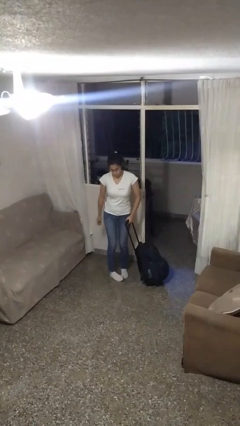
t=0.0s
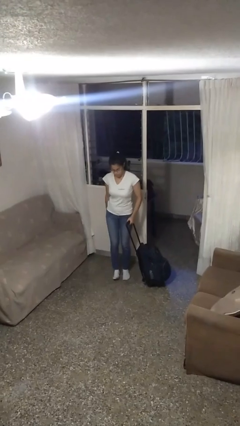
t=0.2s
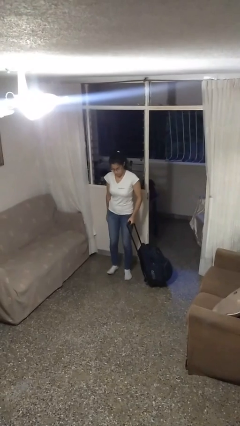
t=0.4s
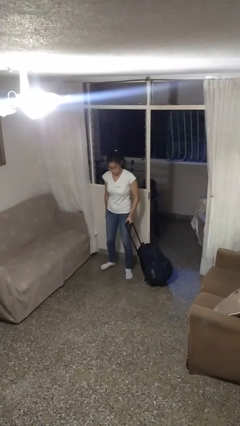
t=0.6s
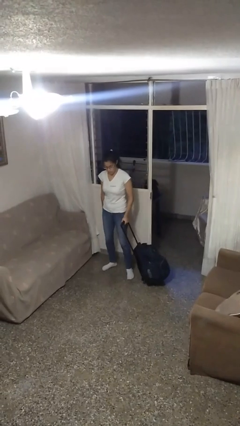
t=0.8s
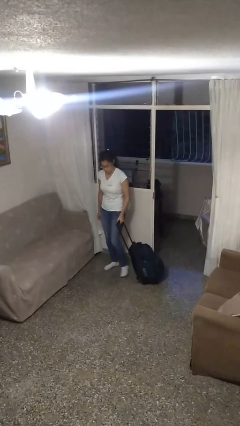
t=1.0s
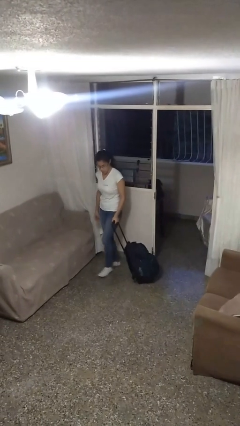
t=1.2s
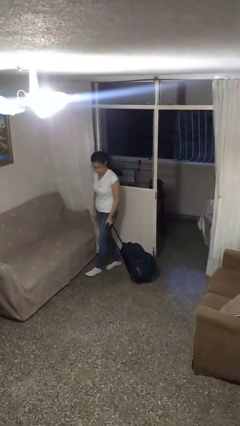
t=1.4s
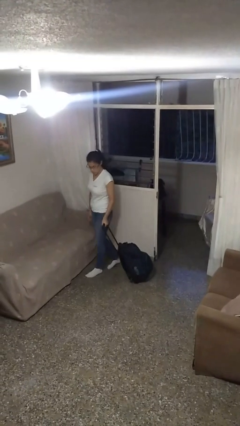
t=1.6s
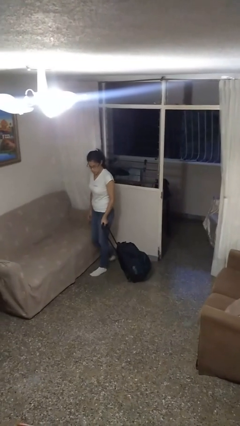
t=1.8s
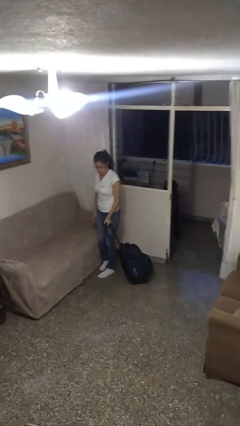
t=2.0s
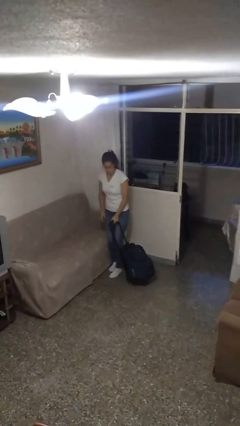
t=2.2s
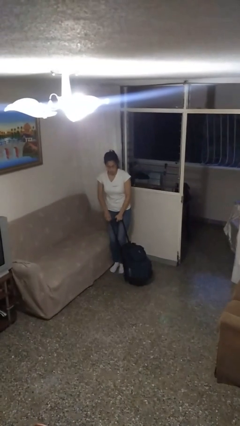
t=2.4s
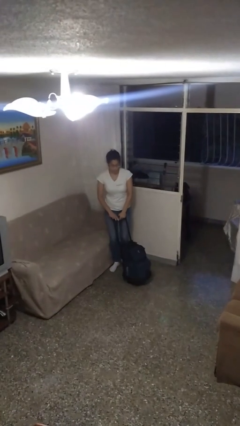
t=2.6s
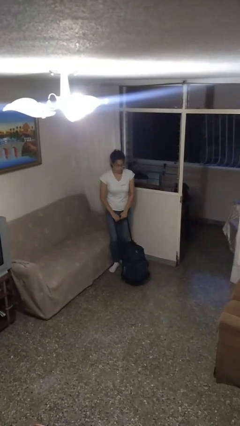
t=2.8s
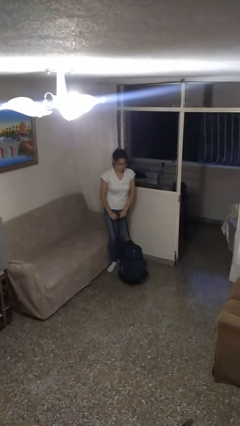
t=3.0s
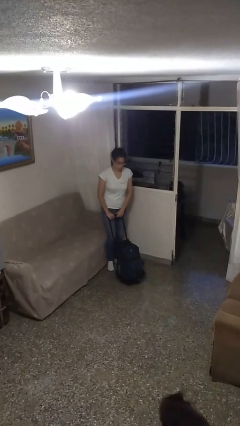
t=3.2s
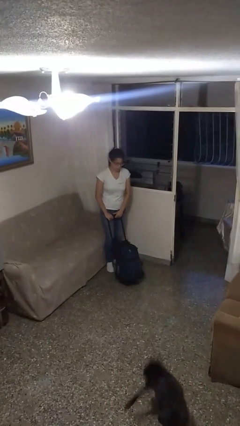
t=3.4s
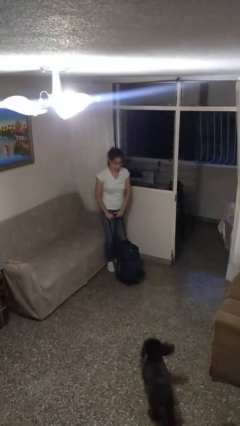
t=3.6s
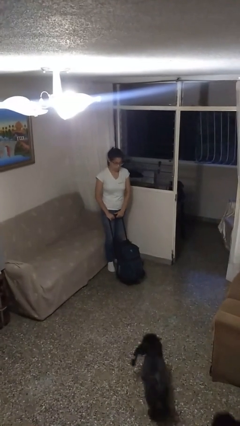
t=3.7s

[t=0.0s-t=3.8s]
person pulls wheeled cart

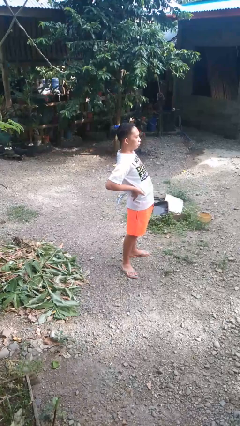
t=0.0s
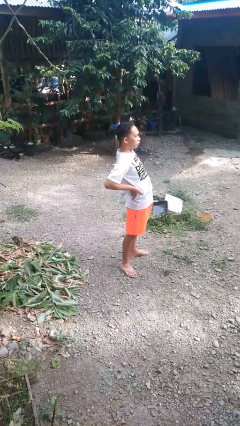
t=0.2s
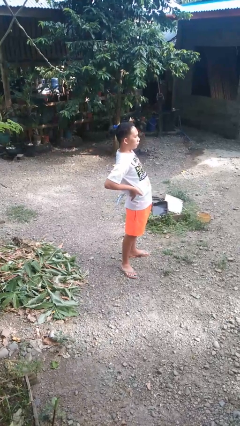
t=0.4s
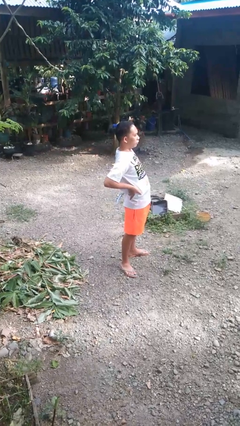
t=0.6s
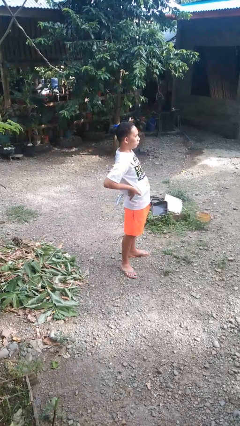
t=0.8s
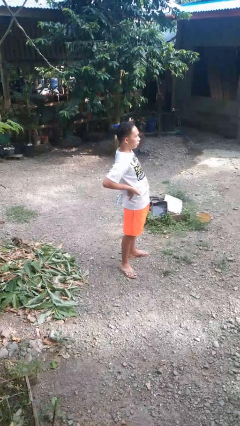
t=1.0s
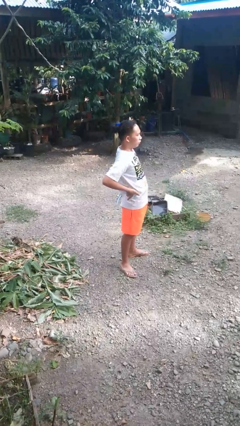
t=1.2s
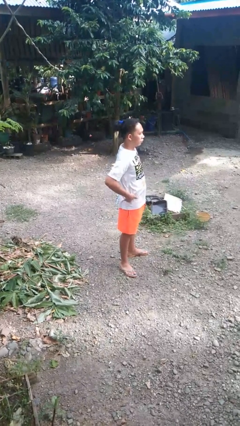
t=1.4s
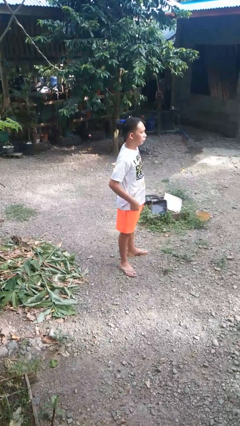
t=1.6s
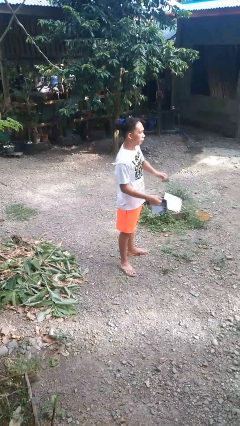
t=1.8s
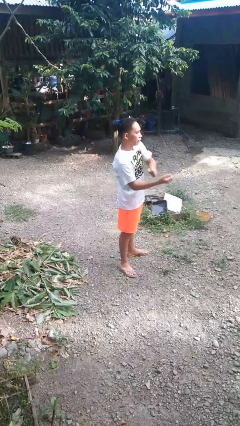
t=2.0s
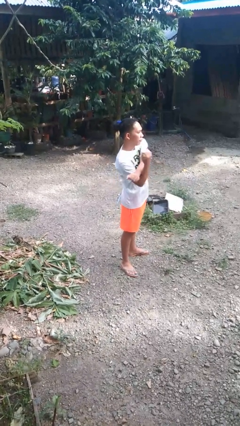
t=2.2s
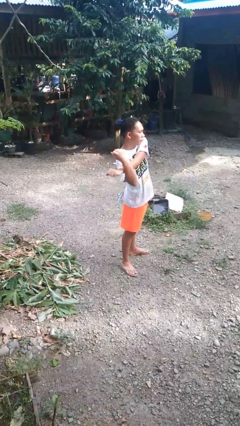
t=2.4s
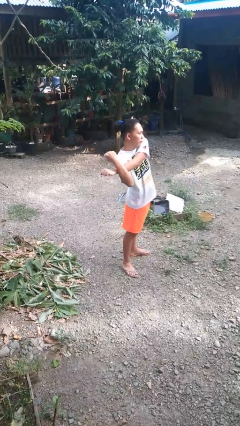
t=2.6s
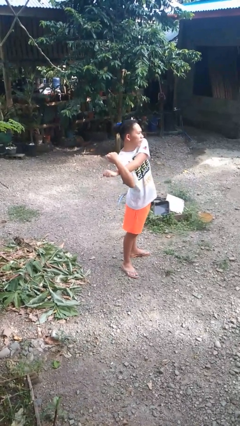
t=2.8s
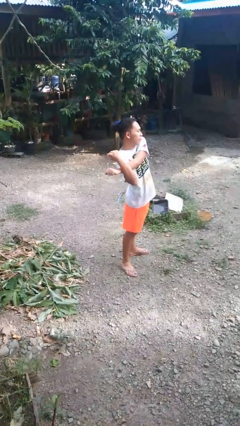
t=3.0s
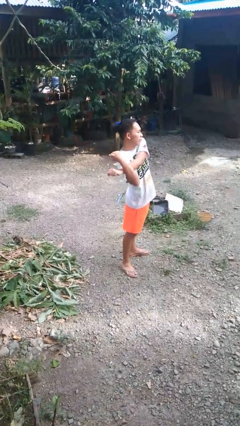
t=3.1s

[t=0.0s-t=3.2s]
person stretches arms to side

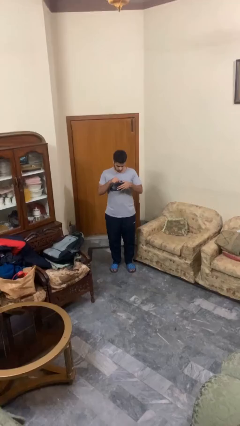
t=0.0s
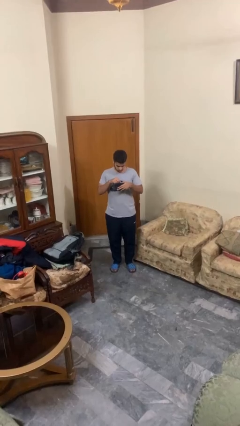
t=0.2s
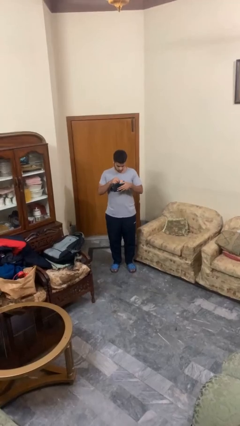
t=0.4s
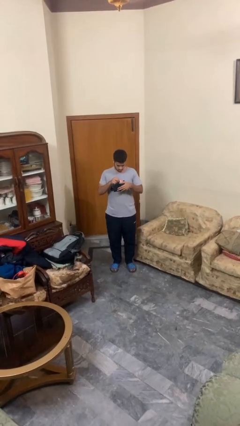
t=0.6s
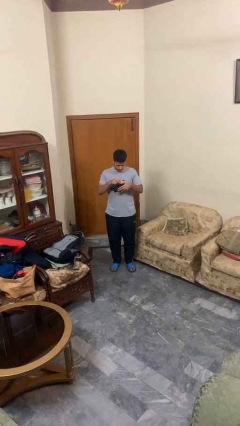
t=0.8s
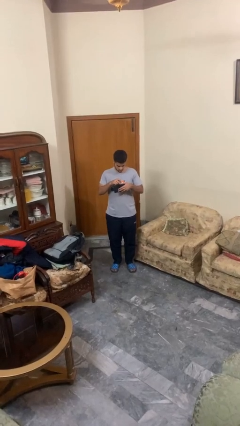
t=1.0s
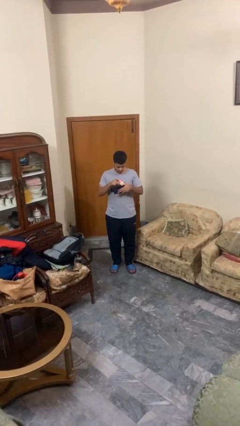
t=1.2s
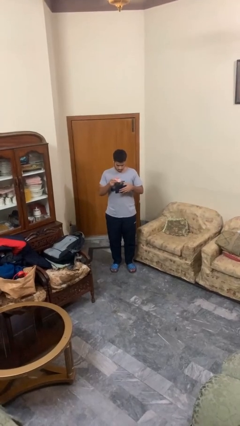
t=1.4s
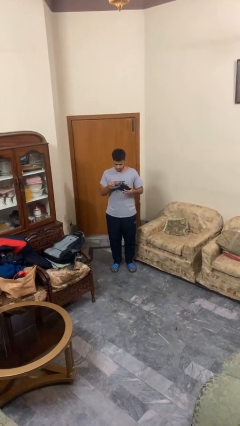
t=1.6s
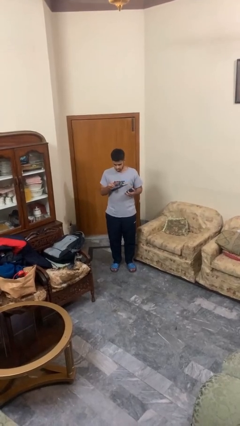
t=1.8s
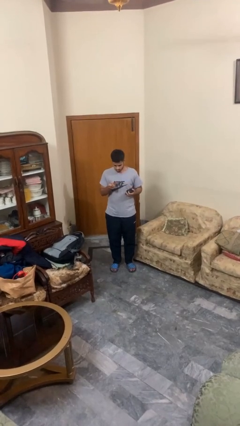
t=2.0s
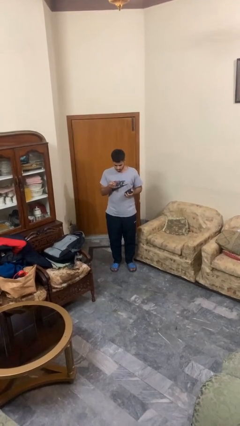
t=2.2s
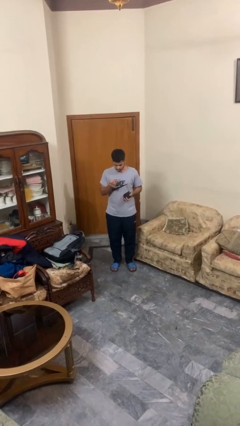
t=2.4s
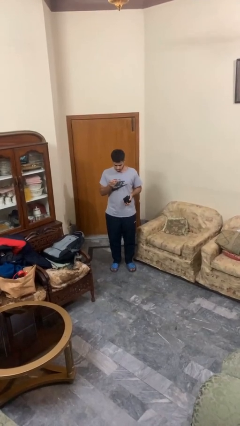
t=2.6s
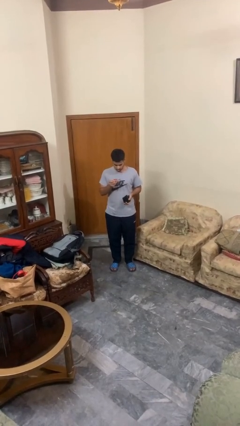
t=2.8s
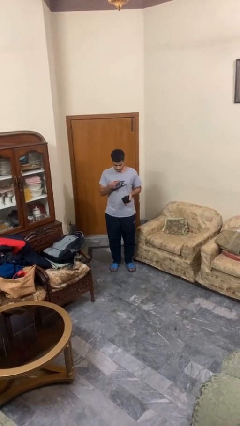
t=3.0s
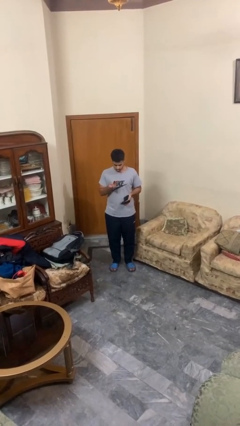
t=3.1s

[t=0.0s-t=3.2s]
person takes object from purse

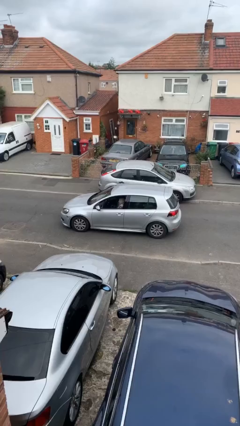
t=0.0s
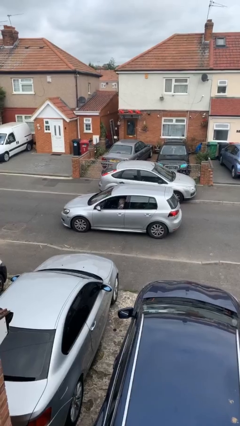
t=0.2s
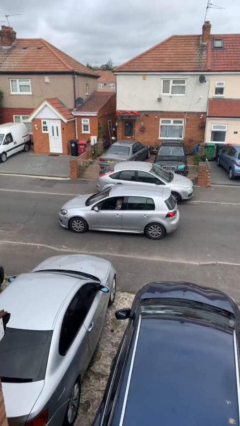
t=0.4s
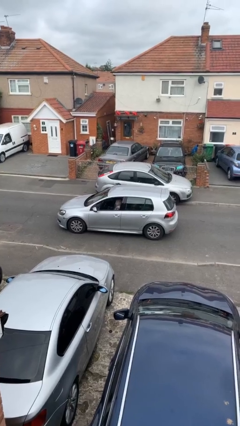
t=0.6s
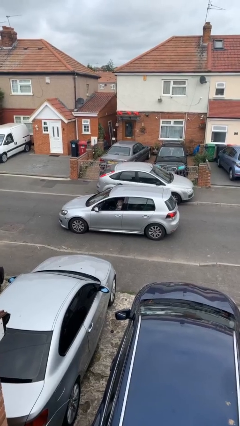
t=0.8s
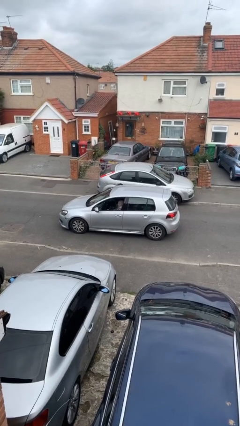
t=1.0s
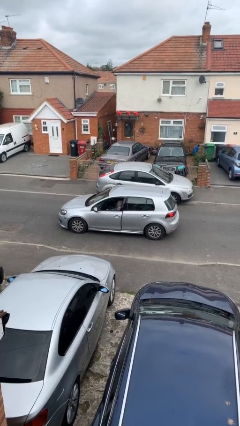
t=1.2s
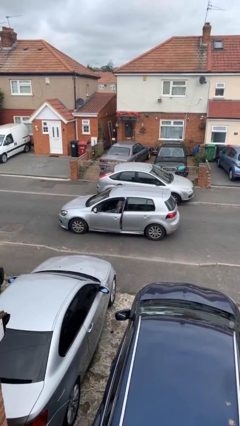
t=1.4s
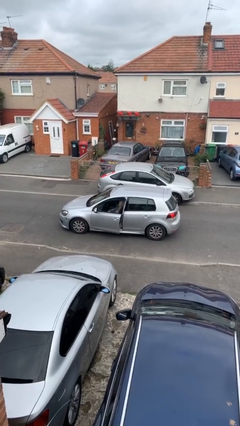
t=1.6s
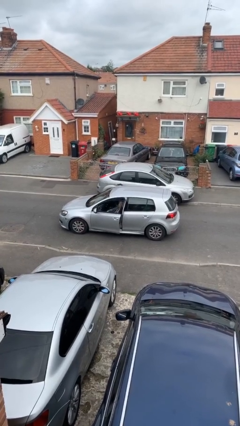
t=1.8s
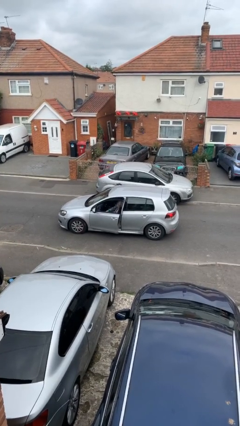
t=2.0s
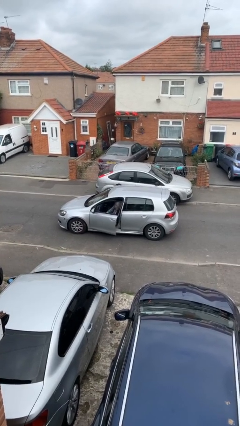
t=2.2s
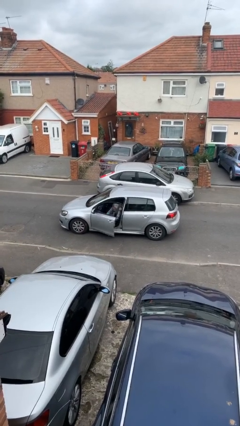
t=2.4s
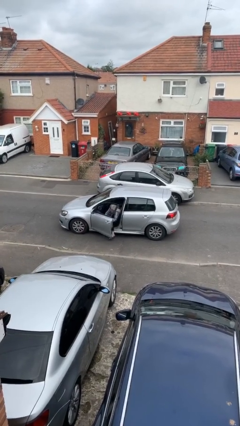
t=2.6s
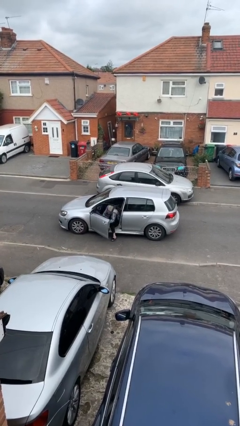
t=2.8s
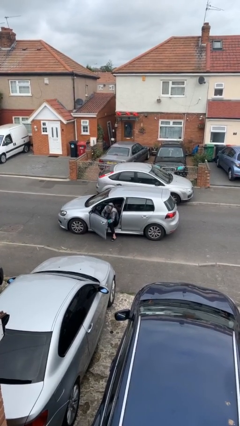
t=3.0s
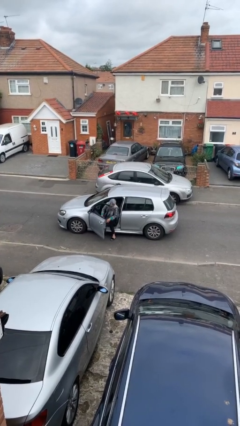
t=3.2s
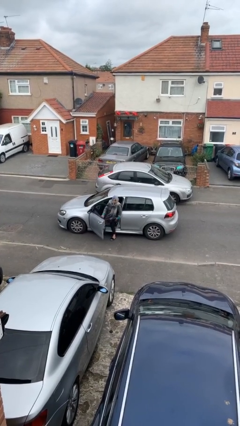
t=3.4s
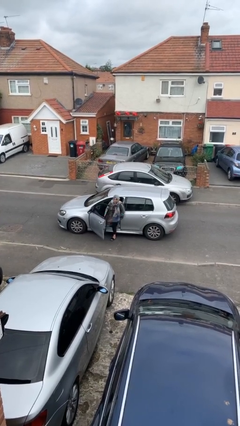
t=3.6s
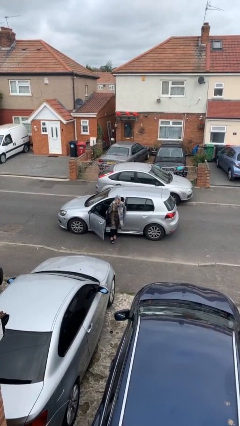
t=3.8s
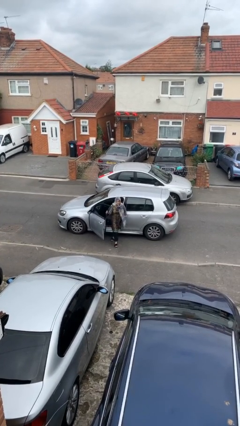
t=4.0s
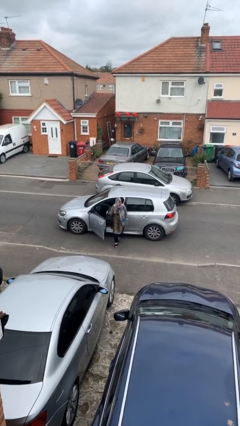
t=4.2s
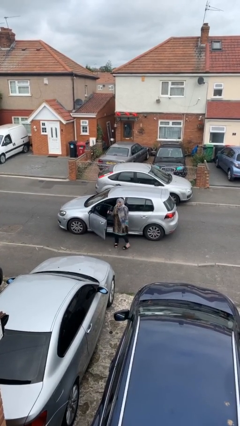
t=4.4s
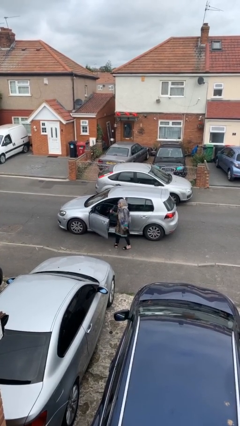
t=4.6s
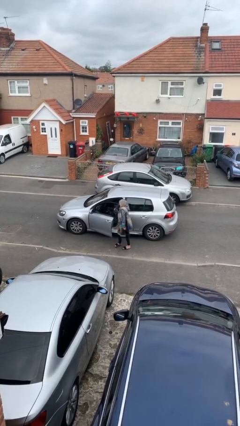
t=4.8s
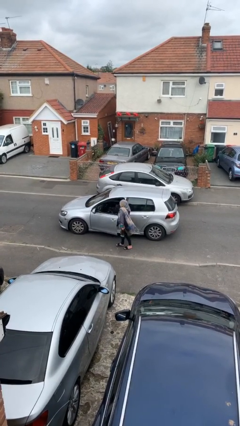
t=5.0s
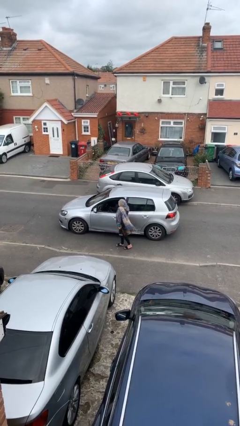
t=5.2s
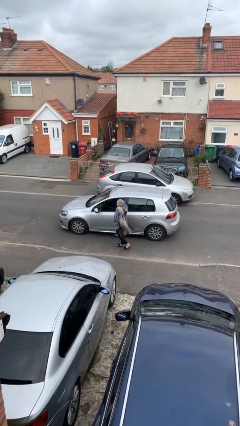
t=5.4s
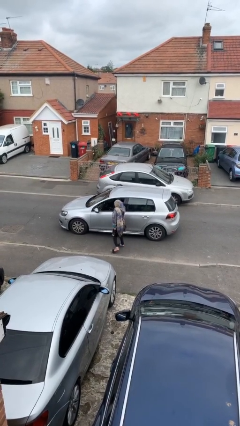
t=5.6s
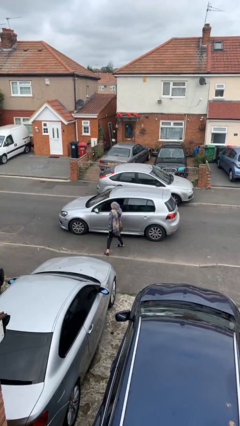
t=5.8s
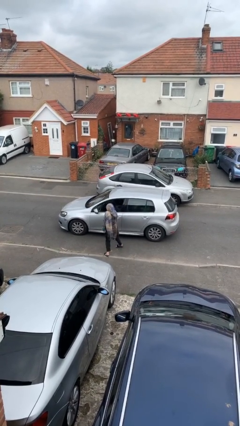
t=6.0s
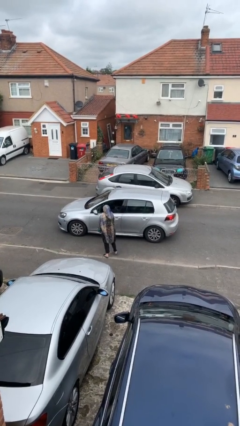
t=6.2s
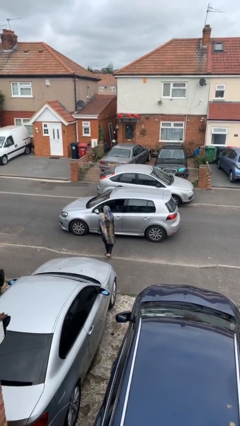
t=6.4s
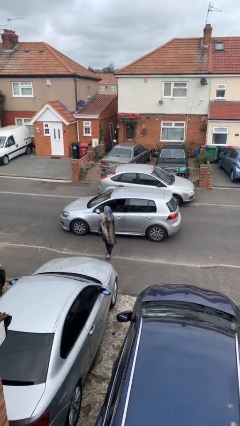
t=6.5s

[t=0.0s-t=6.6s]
car drops off person

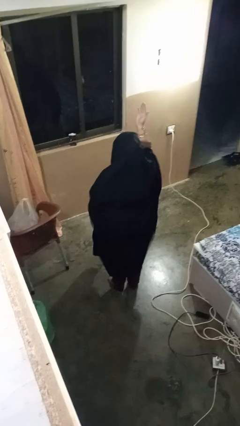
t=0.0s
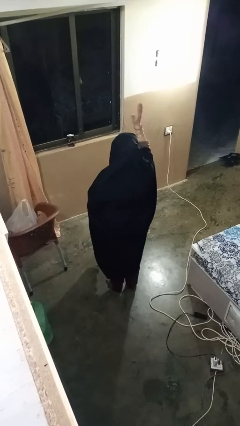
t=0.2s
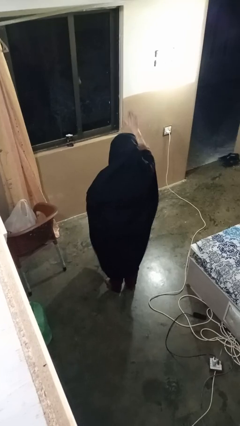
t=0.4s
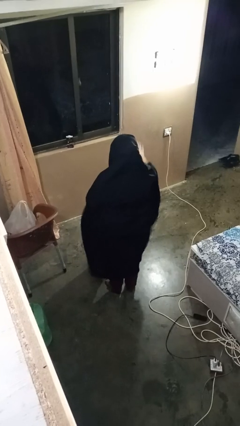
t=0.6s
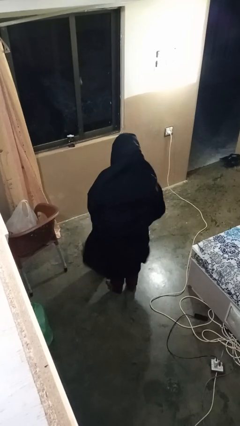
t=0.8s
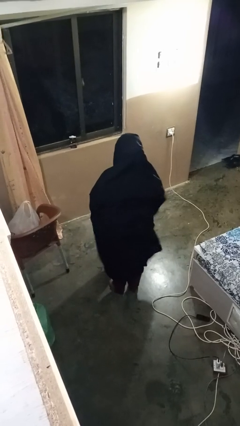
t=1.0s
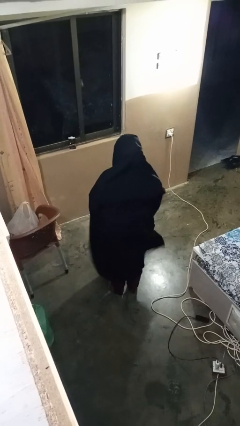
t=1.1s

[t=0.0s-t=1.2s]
person gestures swipe down
